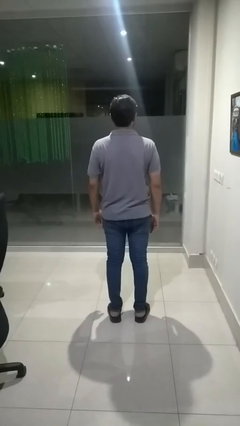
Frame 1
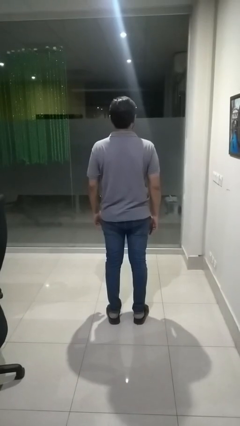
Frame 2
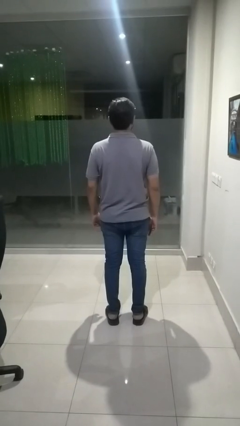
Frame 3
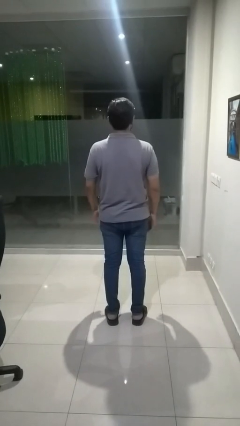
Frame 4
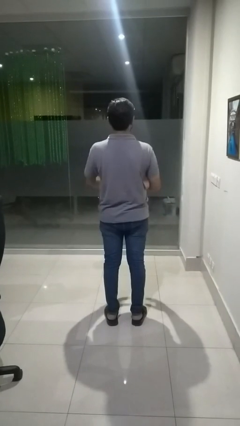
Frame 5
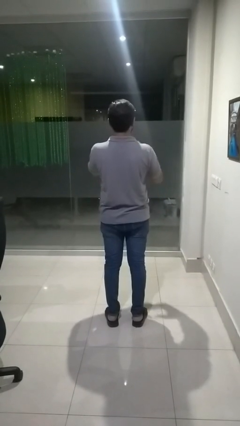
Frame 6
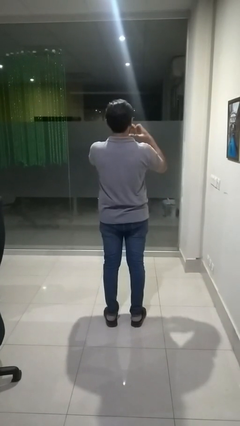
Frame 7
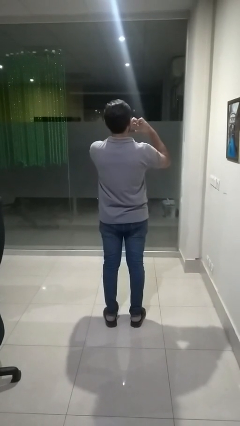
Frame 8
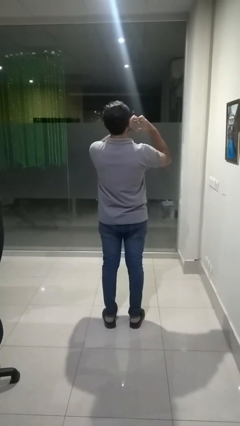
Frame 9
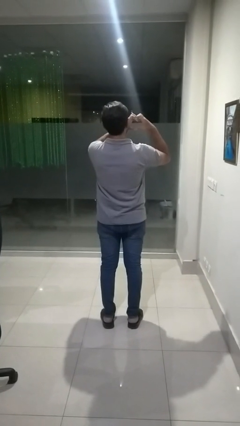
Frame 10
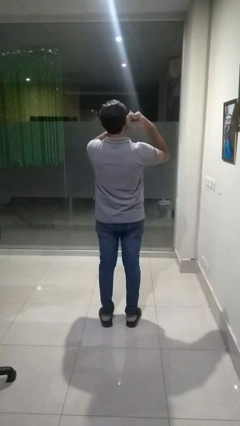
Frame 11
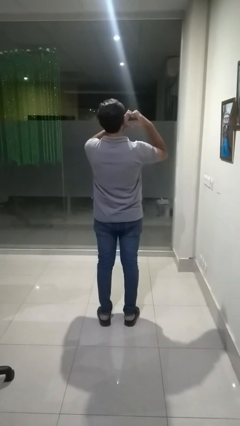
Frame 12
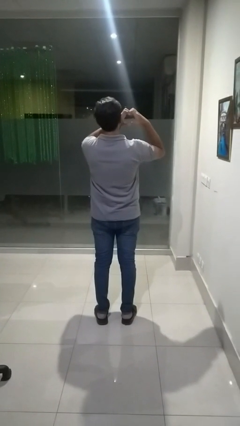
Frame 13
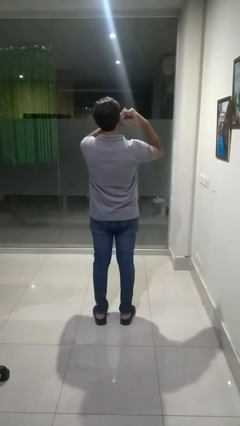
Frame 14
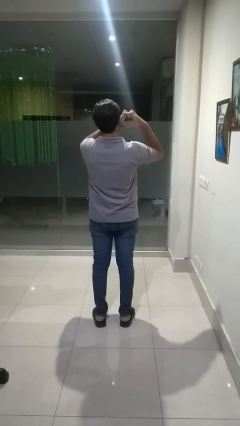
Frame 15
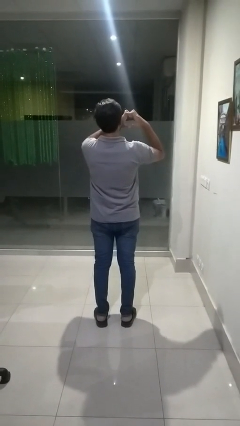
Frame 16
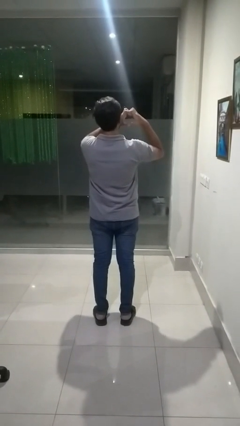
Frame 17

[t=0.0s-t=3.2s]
person gestures heart

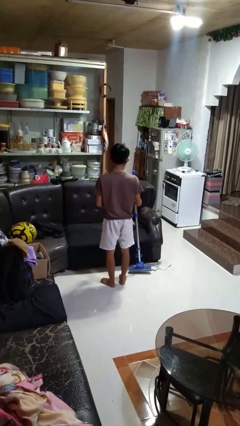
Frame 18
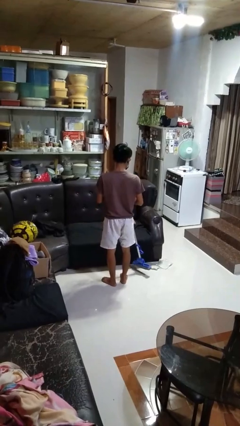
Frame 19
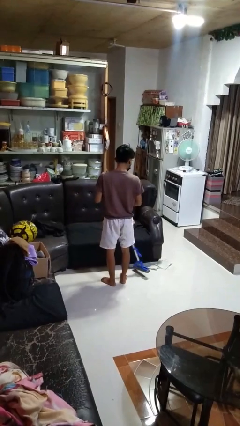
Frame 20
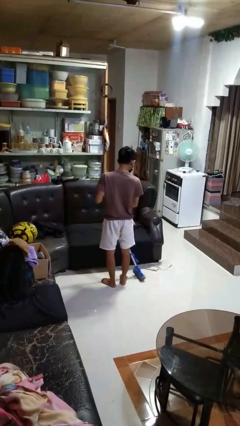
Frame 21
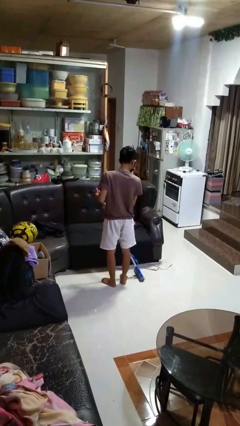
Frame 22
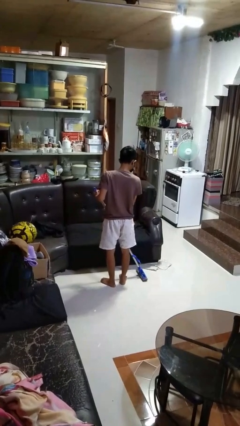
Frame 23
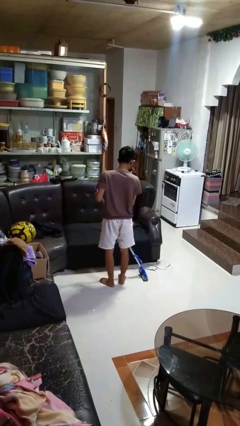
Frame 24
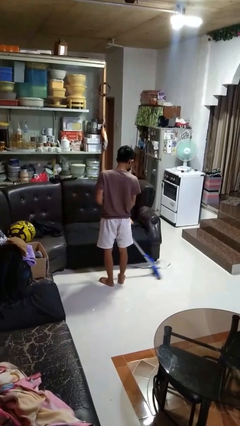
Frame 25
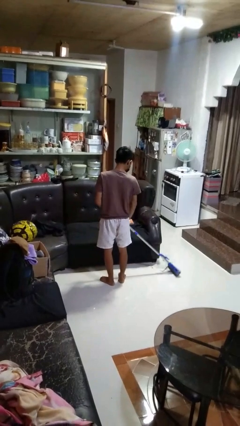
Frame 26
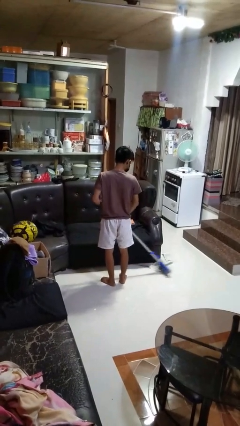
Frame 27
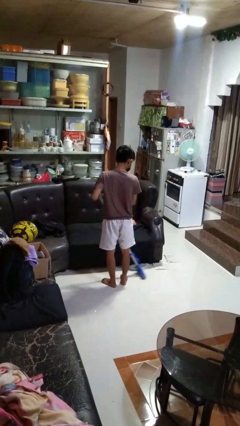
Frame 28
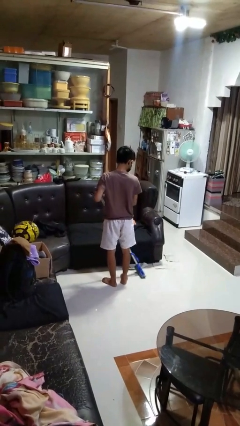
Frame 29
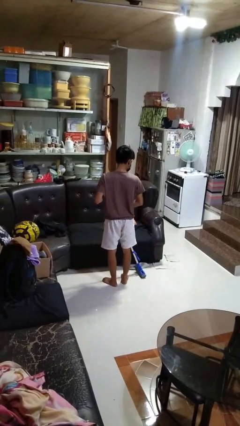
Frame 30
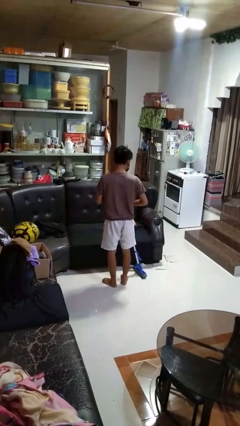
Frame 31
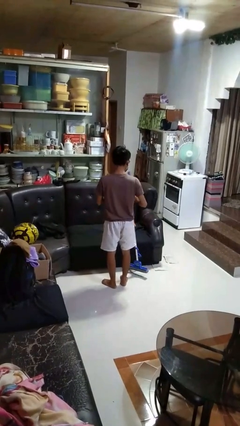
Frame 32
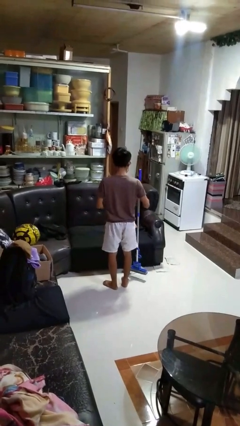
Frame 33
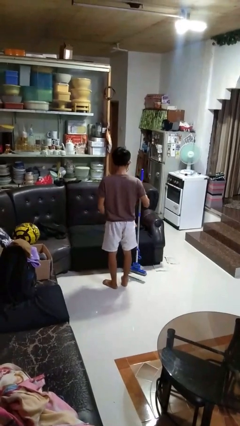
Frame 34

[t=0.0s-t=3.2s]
person mops

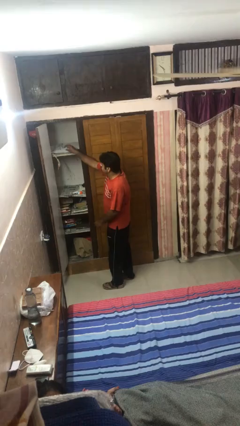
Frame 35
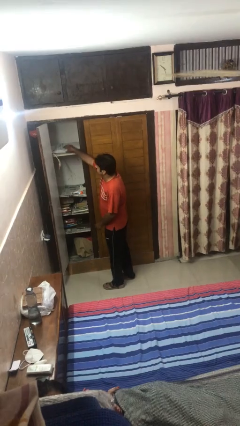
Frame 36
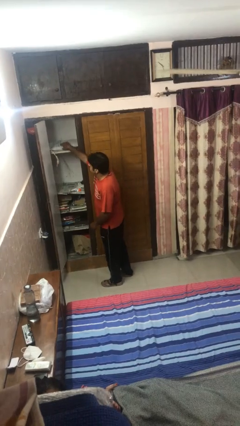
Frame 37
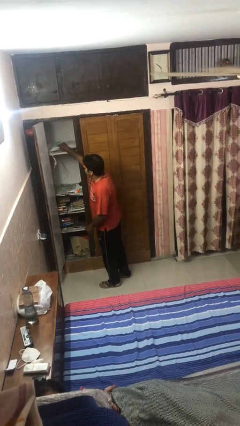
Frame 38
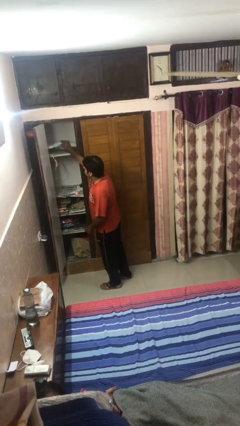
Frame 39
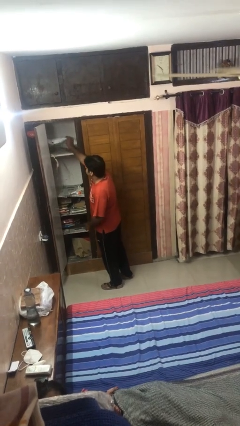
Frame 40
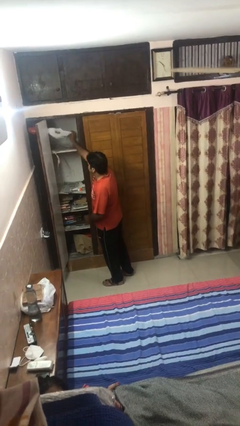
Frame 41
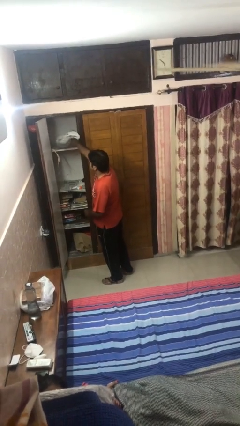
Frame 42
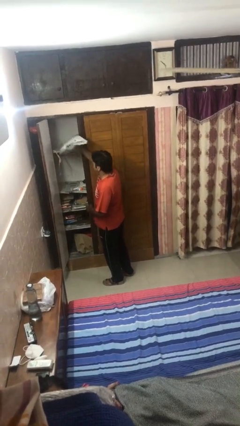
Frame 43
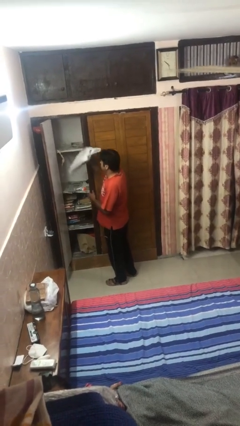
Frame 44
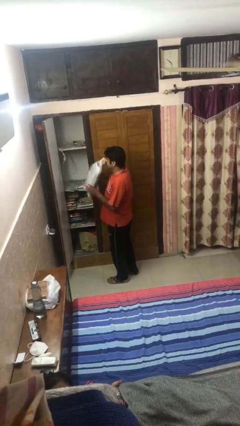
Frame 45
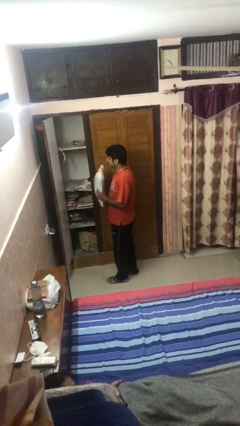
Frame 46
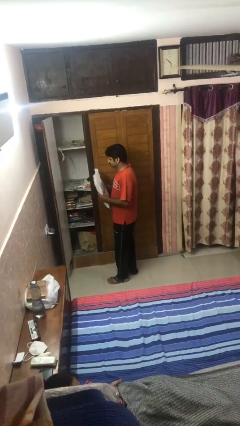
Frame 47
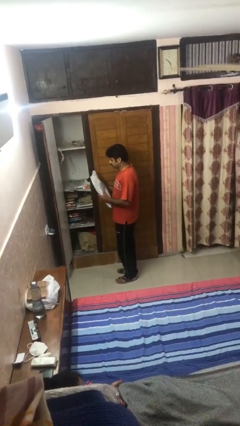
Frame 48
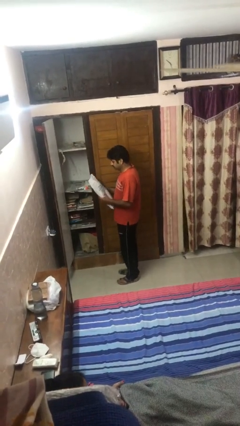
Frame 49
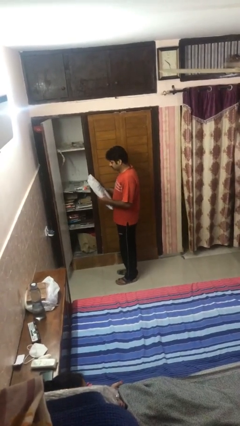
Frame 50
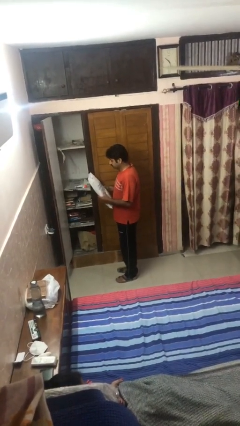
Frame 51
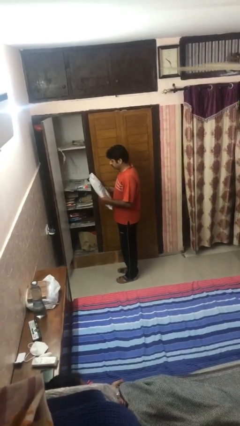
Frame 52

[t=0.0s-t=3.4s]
person picks up object from shelf

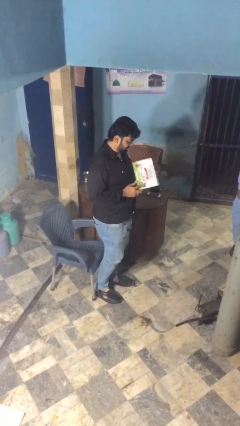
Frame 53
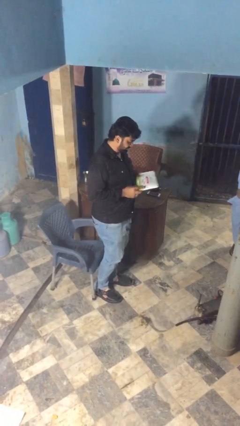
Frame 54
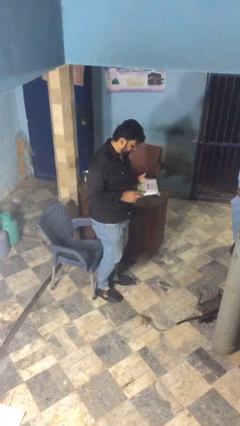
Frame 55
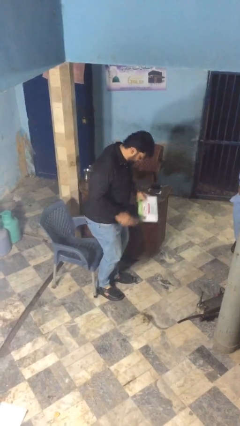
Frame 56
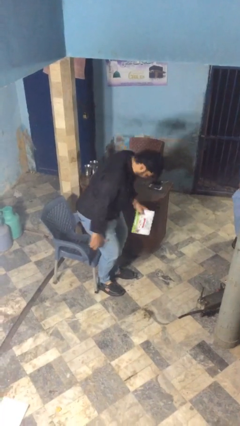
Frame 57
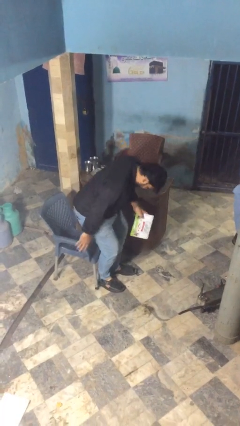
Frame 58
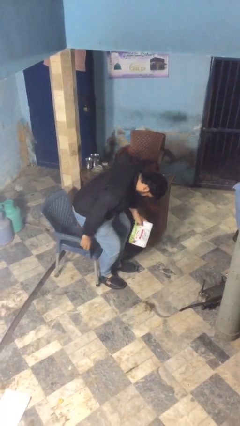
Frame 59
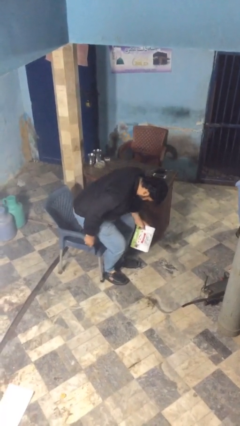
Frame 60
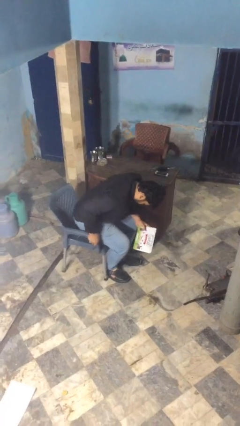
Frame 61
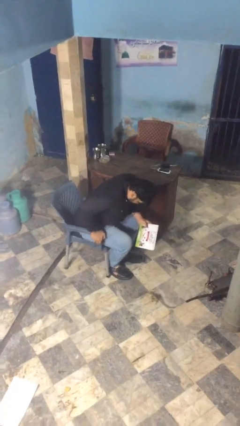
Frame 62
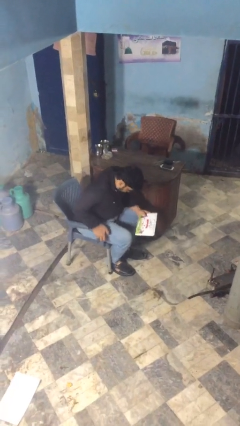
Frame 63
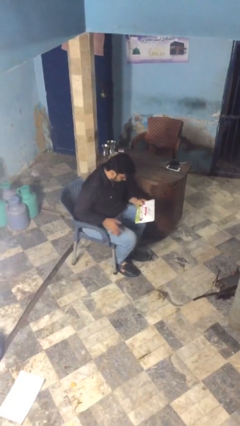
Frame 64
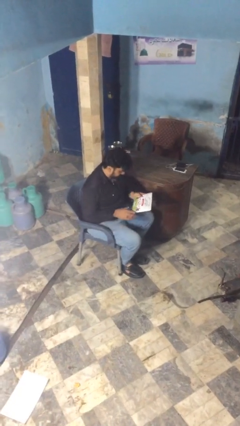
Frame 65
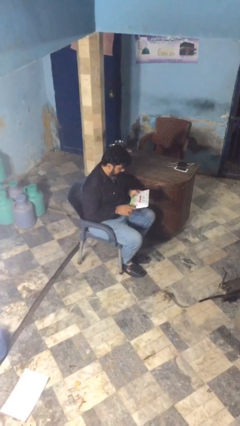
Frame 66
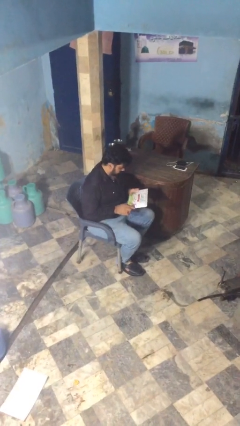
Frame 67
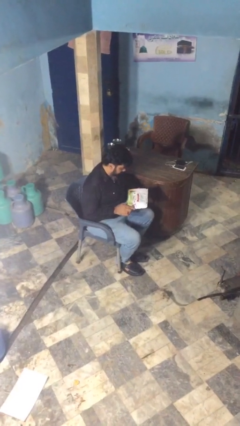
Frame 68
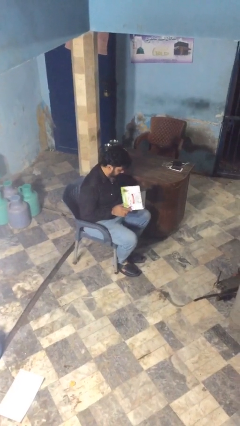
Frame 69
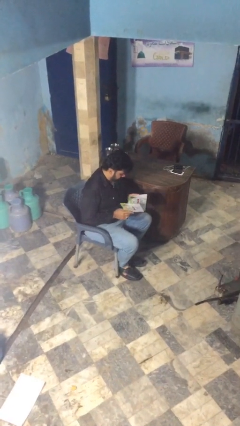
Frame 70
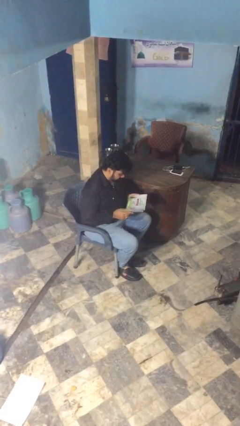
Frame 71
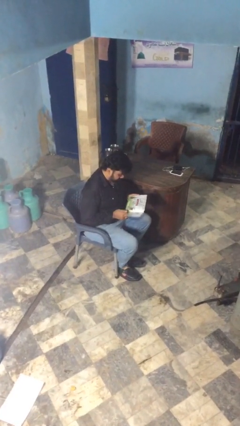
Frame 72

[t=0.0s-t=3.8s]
person sits down

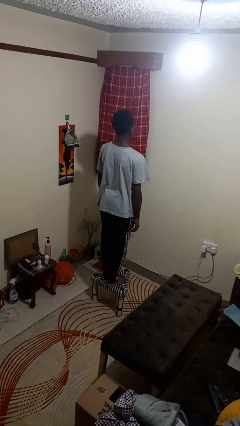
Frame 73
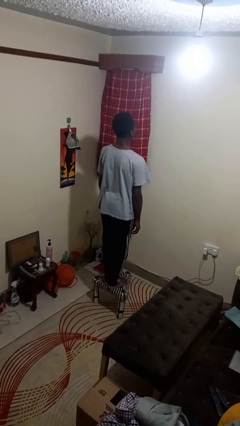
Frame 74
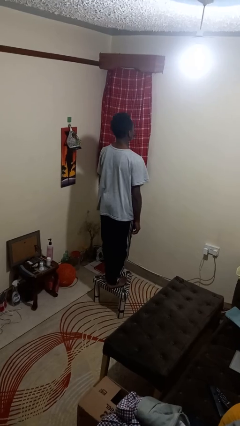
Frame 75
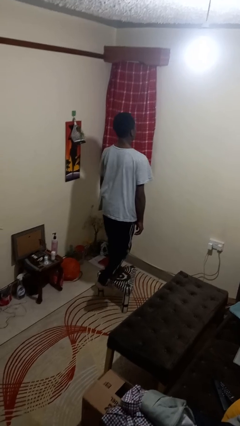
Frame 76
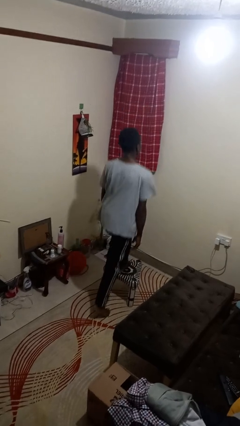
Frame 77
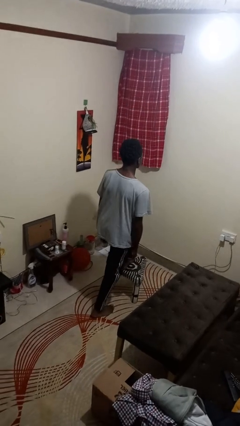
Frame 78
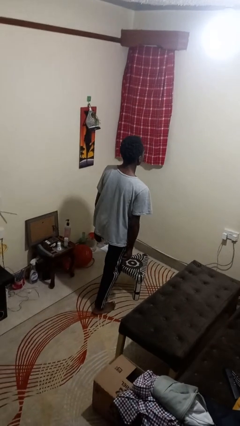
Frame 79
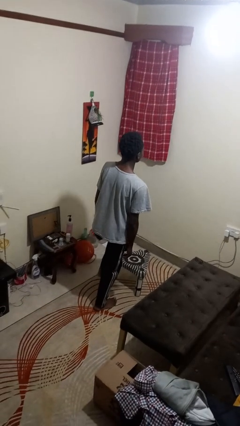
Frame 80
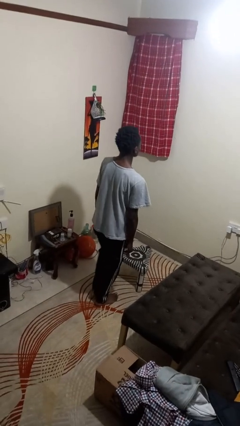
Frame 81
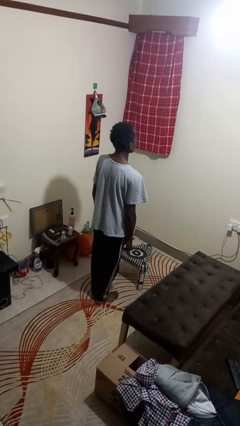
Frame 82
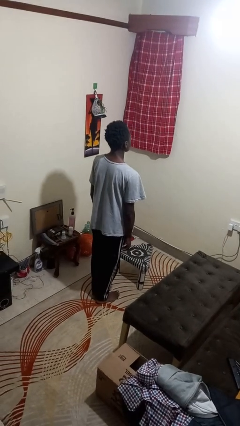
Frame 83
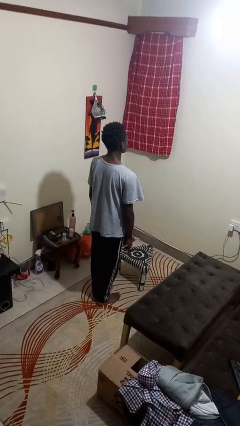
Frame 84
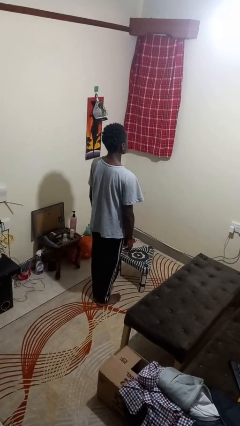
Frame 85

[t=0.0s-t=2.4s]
person climbs off chair

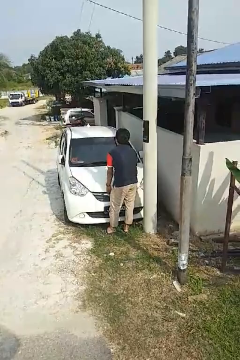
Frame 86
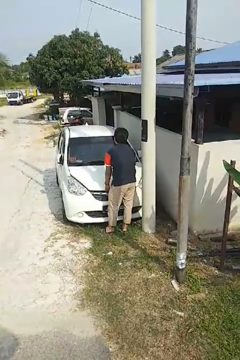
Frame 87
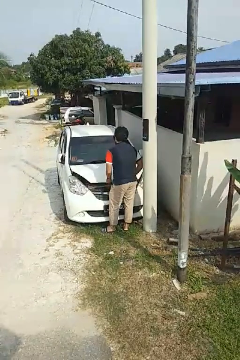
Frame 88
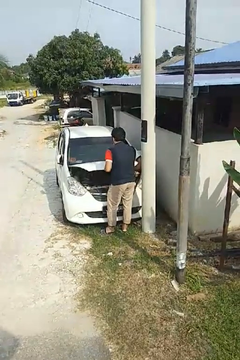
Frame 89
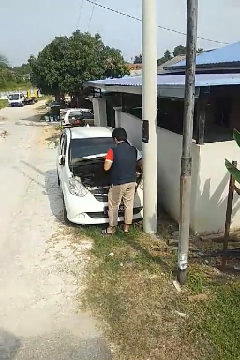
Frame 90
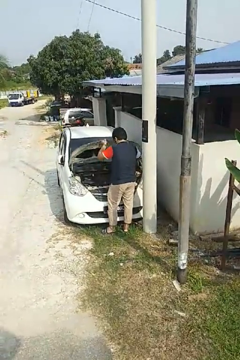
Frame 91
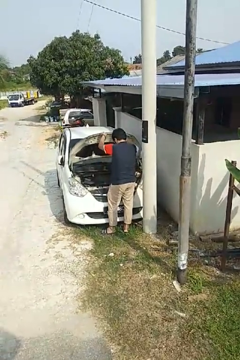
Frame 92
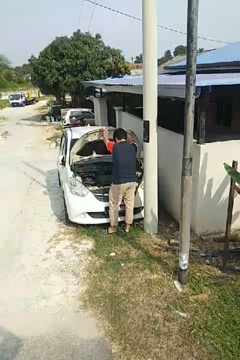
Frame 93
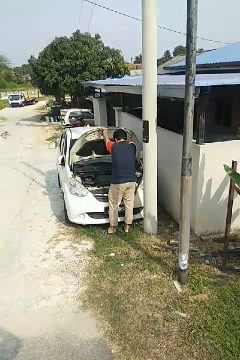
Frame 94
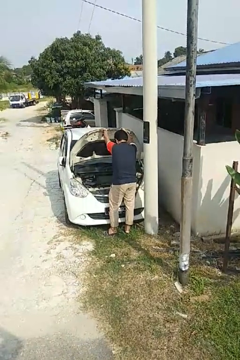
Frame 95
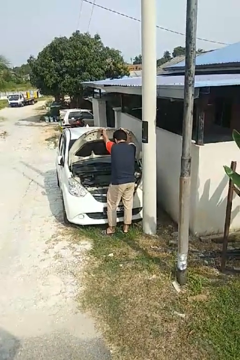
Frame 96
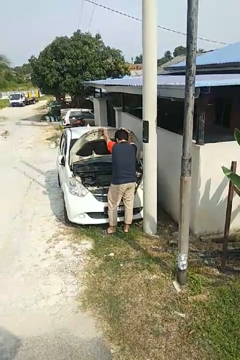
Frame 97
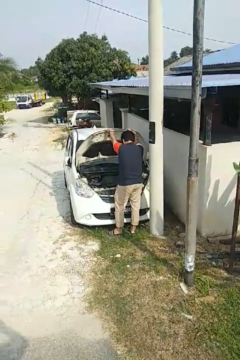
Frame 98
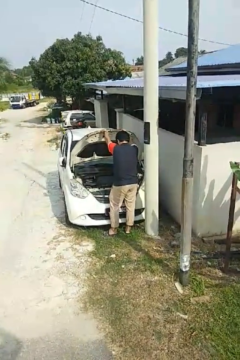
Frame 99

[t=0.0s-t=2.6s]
person opens car hood
